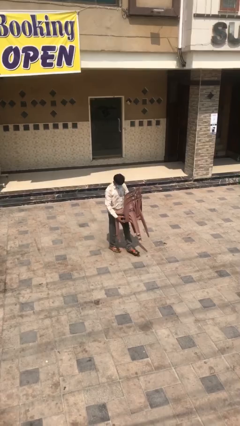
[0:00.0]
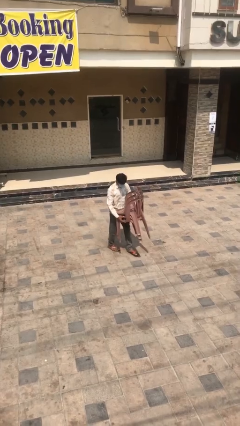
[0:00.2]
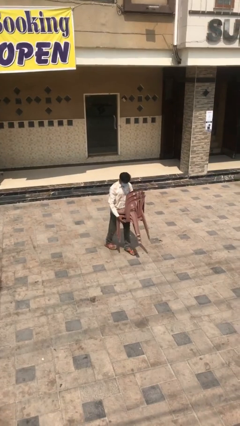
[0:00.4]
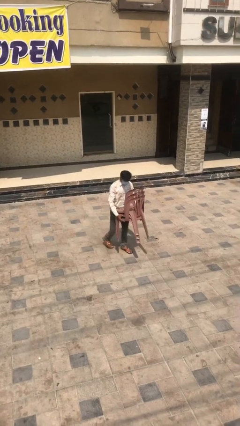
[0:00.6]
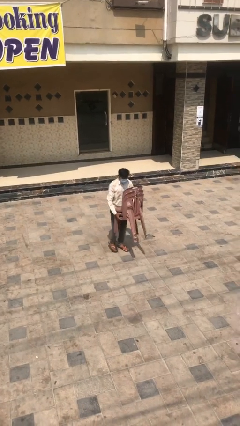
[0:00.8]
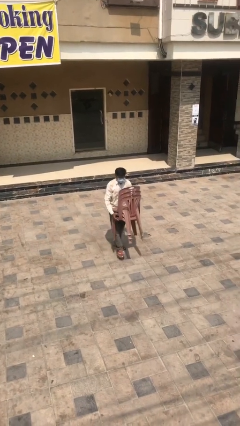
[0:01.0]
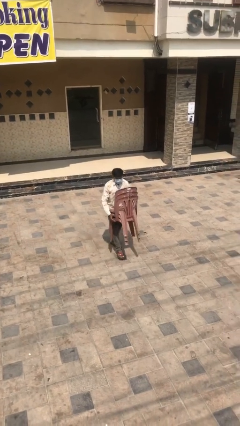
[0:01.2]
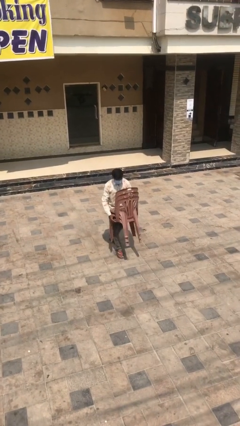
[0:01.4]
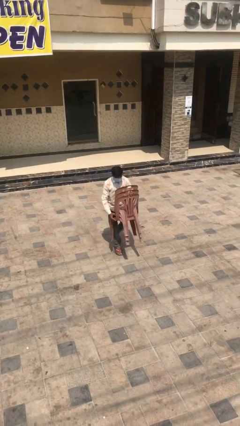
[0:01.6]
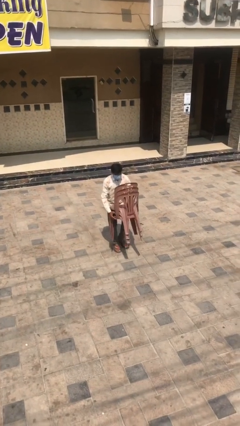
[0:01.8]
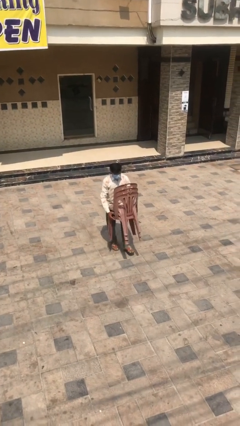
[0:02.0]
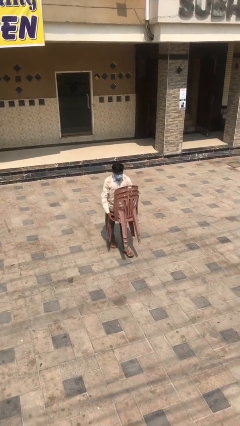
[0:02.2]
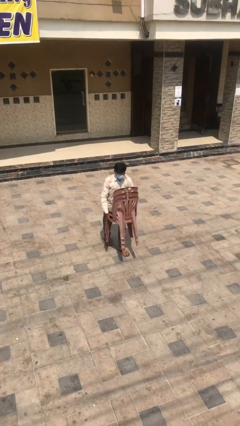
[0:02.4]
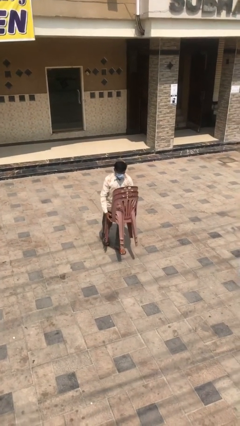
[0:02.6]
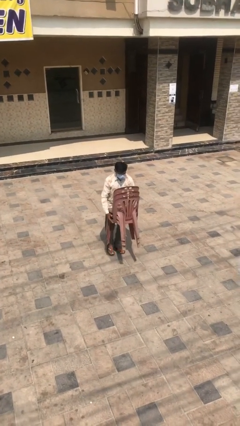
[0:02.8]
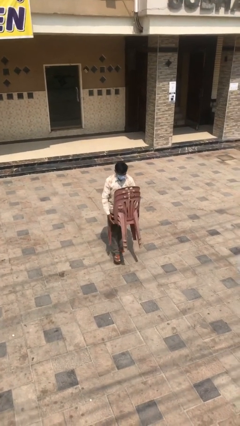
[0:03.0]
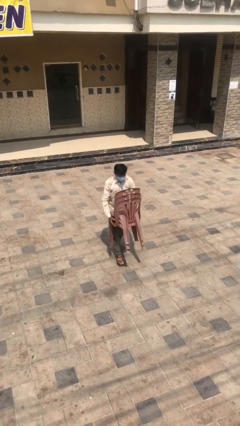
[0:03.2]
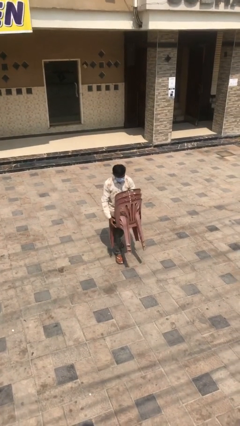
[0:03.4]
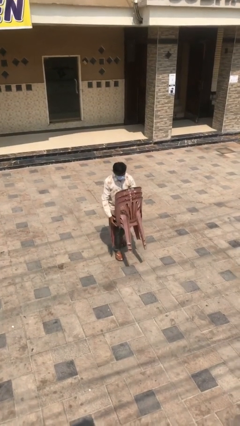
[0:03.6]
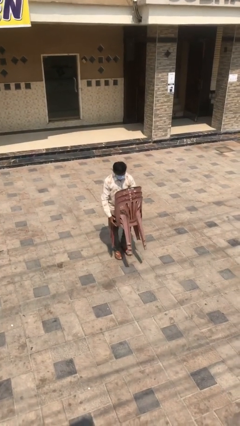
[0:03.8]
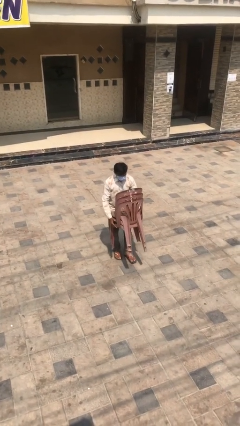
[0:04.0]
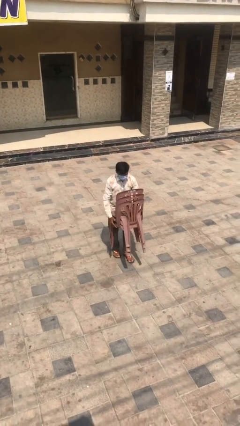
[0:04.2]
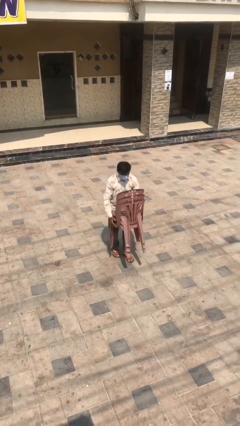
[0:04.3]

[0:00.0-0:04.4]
person carries heavy object

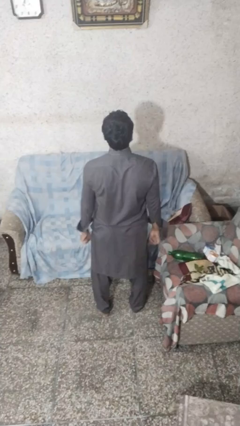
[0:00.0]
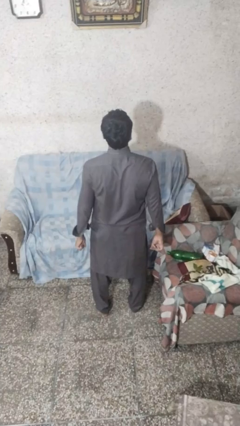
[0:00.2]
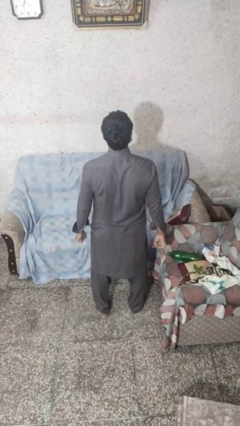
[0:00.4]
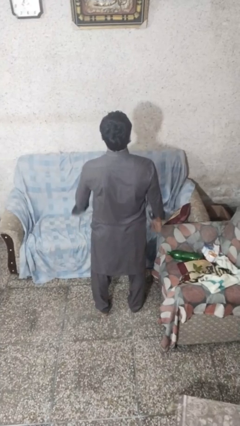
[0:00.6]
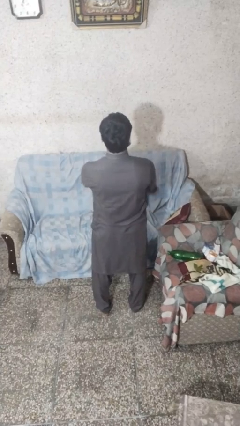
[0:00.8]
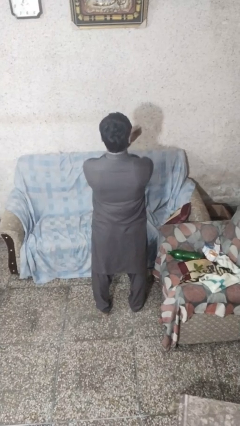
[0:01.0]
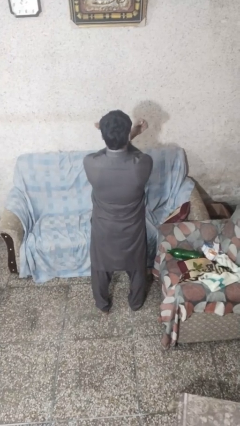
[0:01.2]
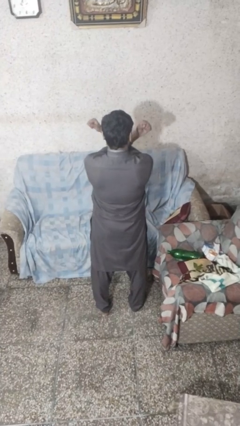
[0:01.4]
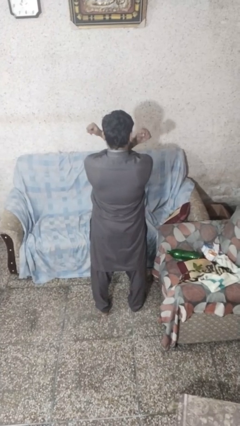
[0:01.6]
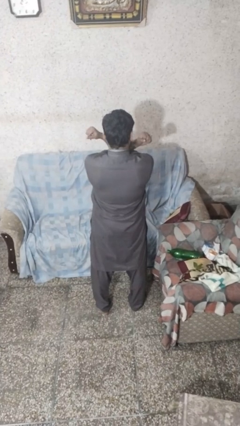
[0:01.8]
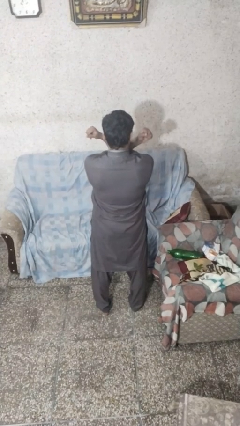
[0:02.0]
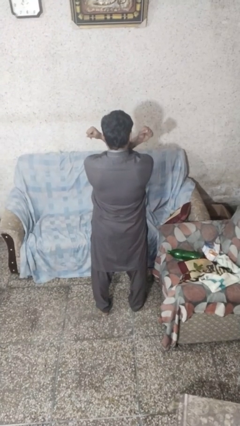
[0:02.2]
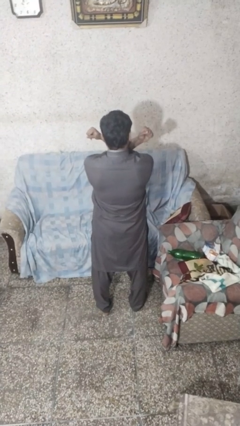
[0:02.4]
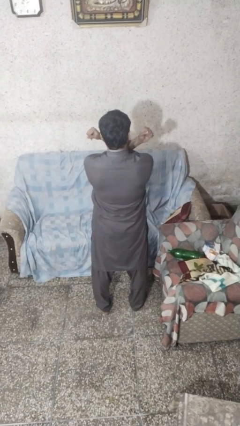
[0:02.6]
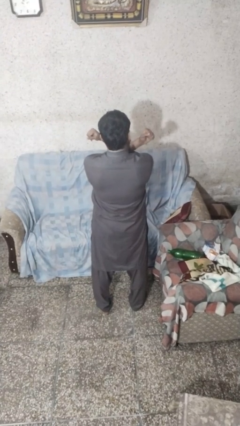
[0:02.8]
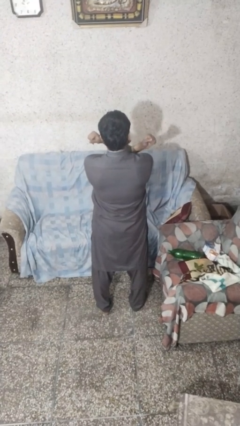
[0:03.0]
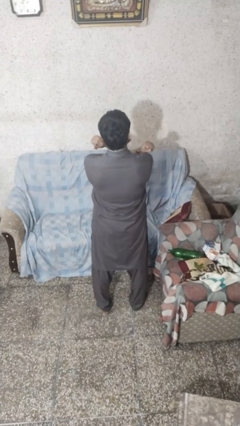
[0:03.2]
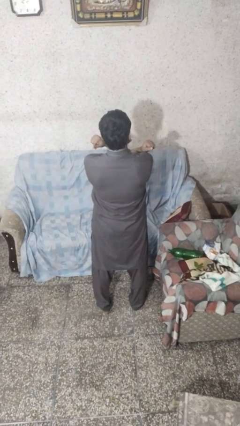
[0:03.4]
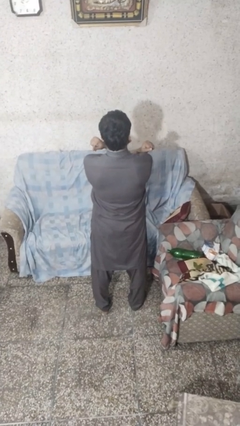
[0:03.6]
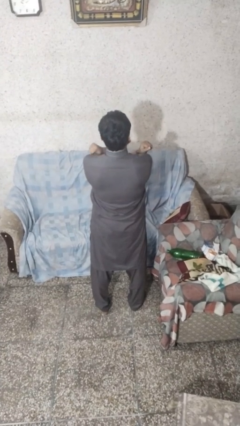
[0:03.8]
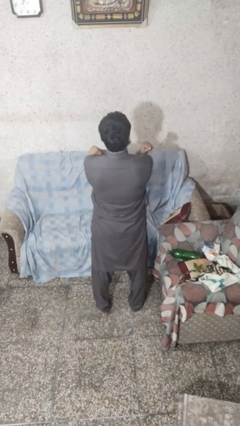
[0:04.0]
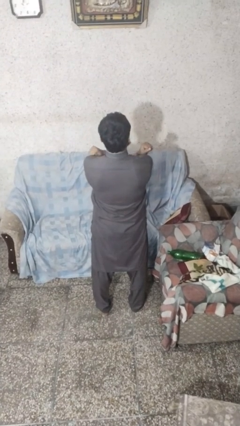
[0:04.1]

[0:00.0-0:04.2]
person gestures arms x

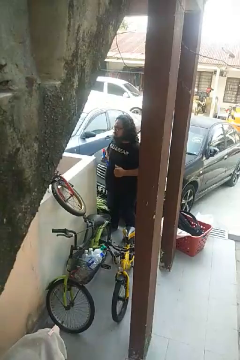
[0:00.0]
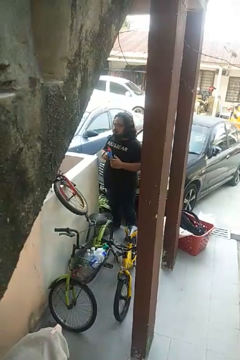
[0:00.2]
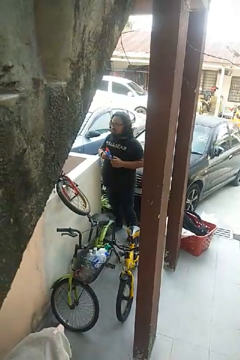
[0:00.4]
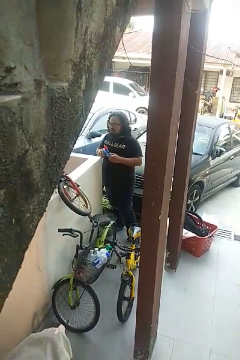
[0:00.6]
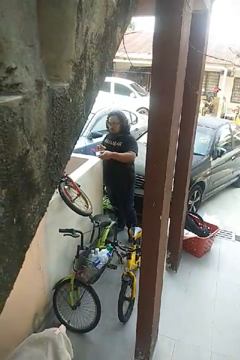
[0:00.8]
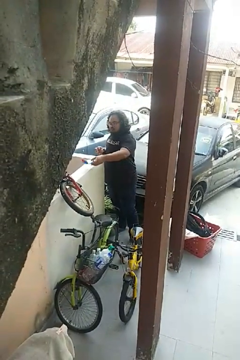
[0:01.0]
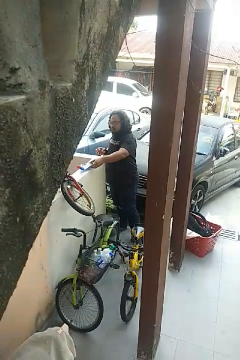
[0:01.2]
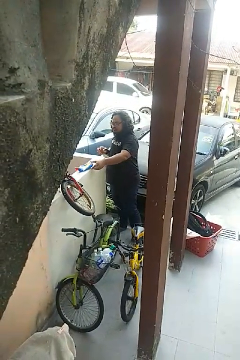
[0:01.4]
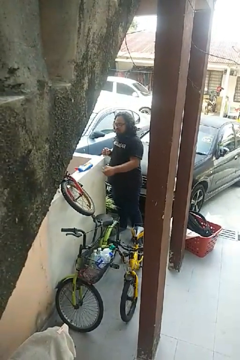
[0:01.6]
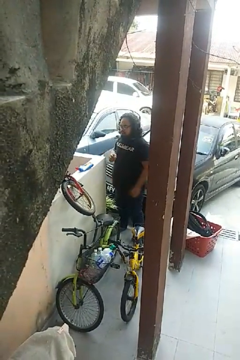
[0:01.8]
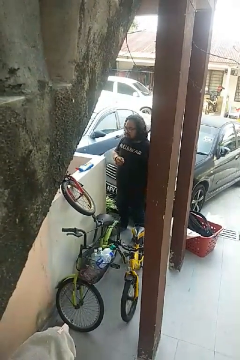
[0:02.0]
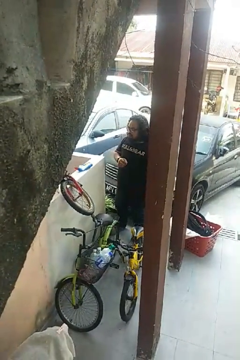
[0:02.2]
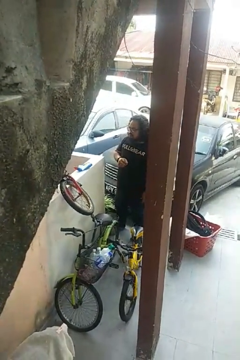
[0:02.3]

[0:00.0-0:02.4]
person puts down object on countertop

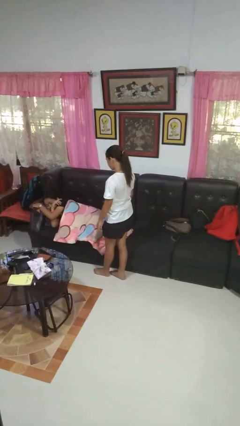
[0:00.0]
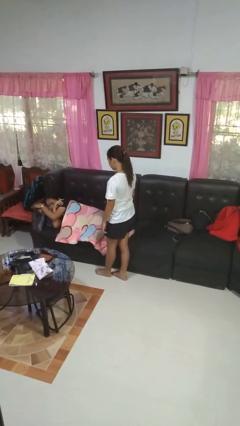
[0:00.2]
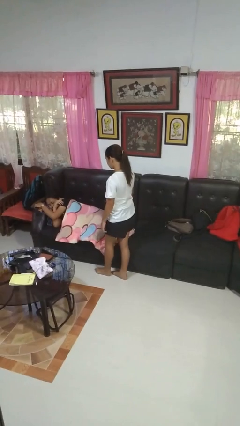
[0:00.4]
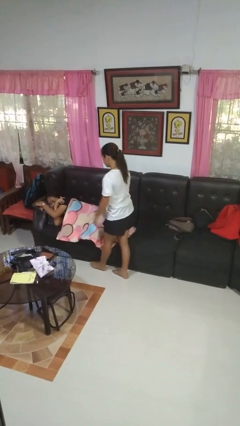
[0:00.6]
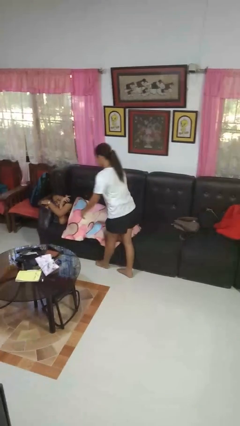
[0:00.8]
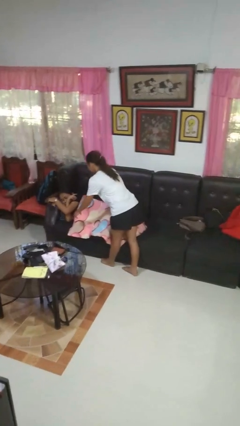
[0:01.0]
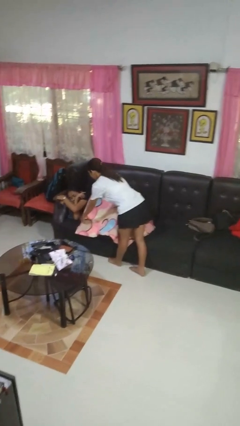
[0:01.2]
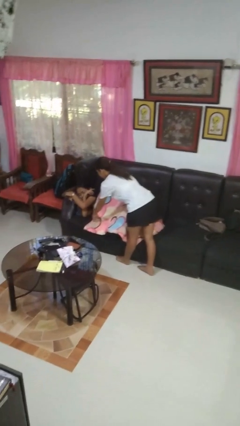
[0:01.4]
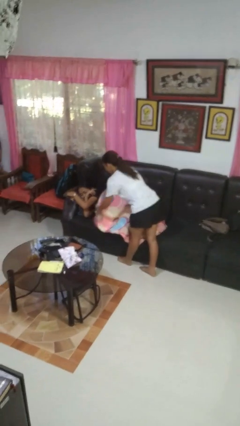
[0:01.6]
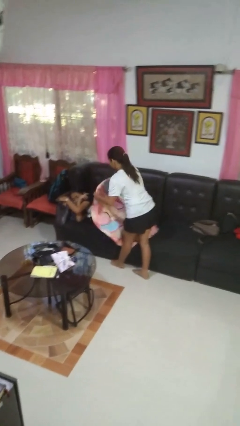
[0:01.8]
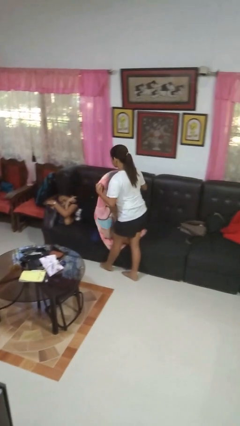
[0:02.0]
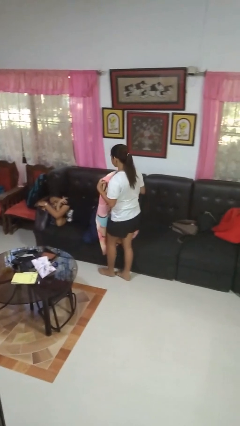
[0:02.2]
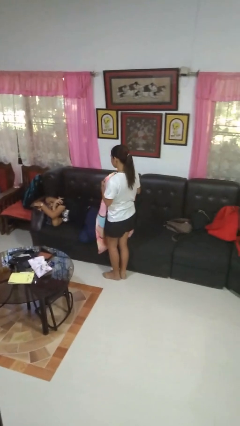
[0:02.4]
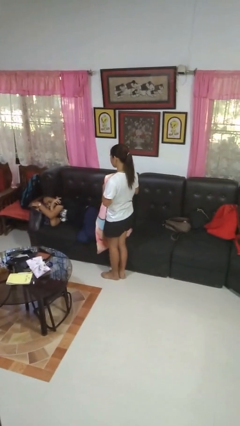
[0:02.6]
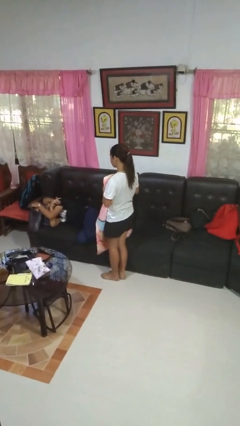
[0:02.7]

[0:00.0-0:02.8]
person uncovers friend with blanket

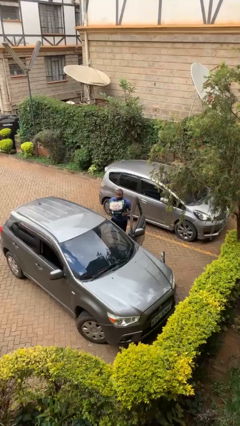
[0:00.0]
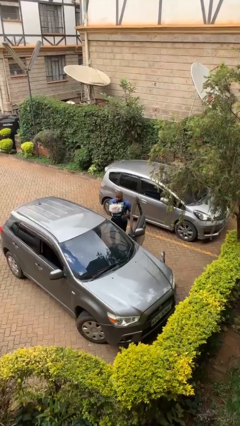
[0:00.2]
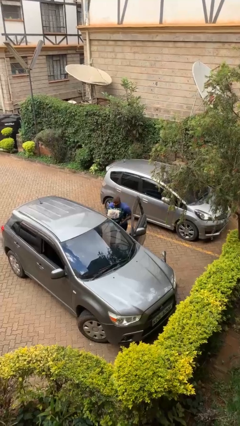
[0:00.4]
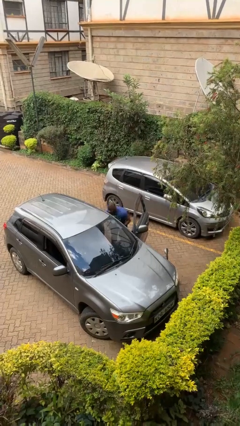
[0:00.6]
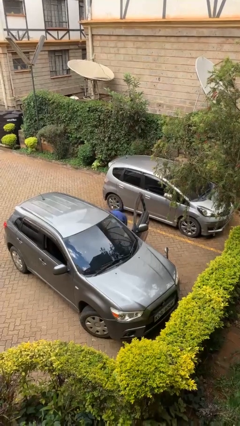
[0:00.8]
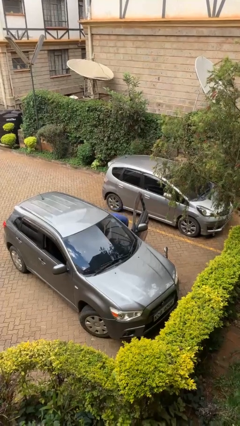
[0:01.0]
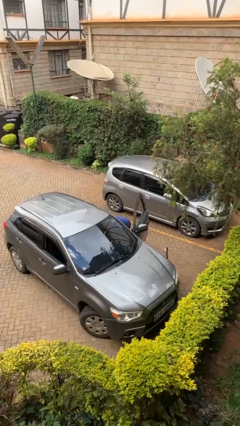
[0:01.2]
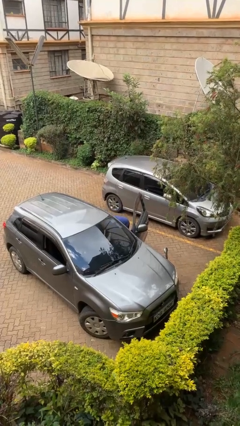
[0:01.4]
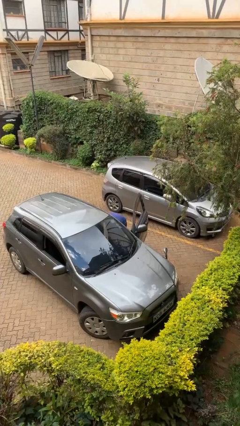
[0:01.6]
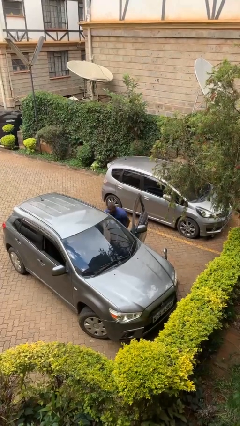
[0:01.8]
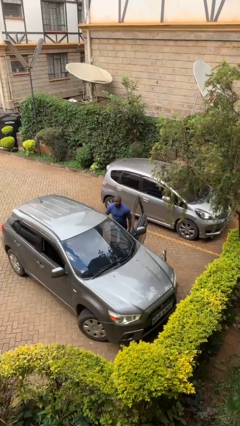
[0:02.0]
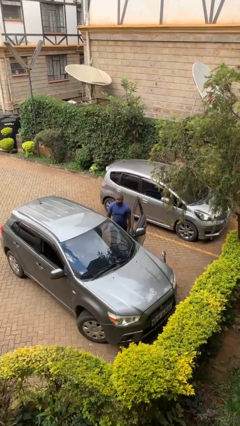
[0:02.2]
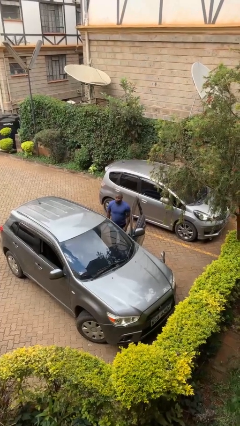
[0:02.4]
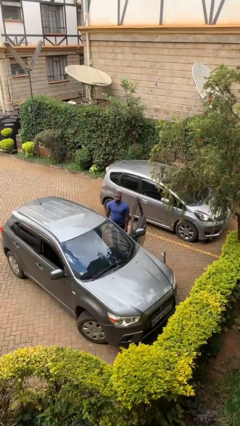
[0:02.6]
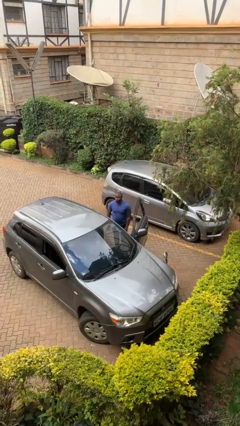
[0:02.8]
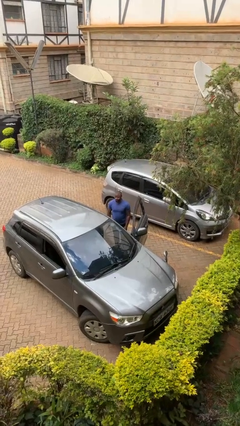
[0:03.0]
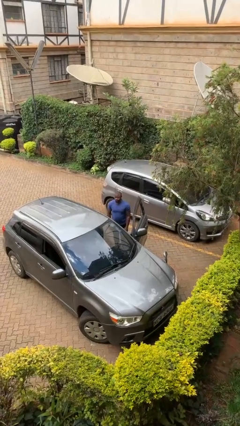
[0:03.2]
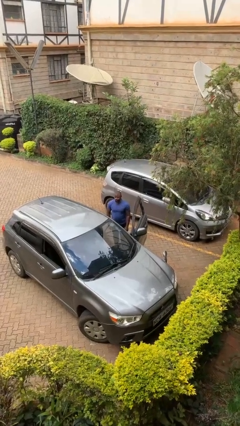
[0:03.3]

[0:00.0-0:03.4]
person loads car

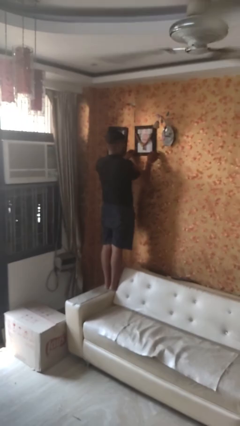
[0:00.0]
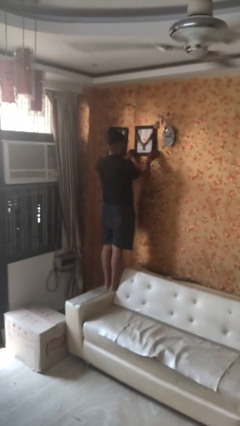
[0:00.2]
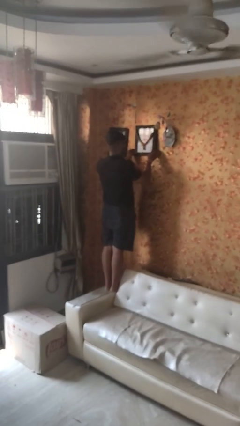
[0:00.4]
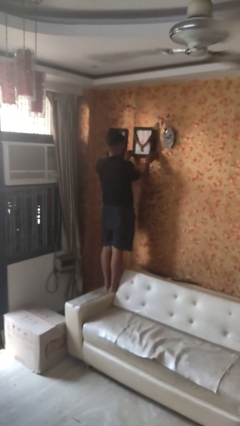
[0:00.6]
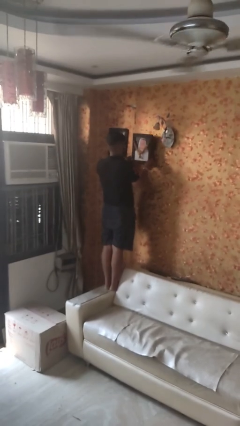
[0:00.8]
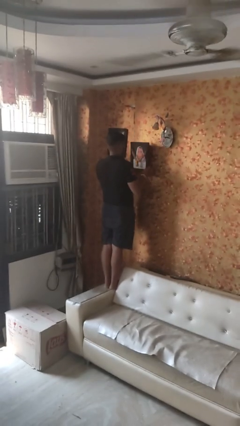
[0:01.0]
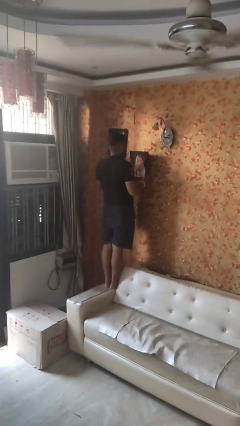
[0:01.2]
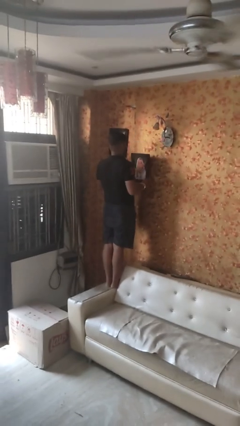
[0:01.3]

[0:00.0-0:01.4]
person takes down picture frame
